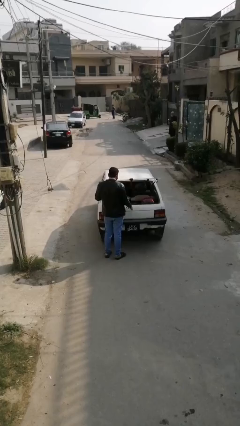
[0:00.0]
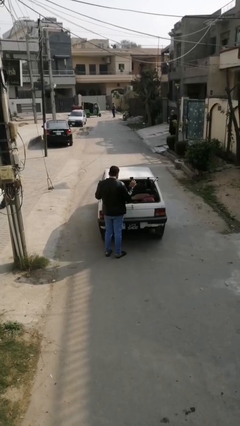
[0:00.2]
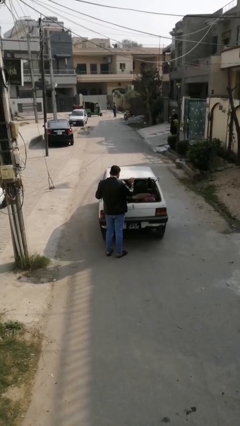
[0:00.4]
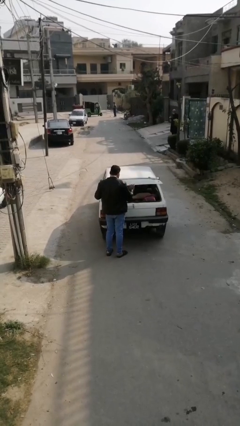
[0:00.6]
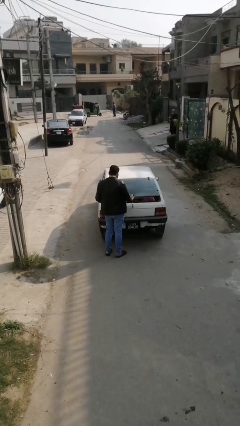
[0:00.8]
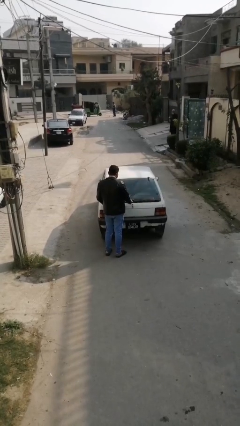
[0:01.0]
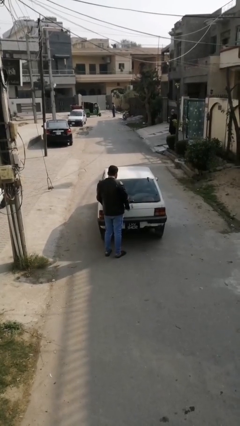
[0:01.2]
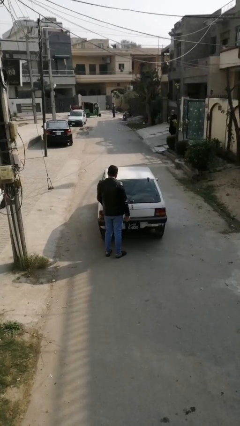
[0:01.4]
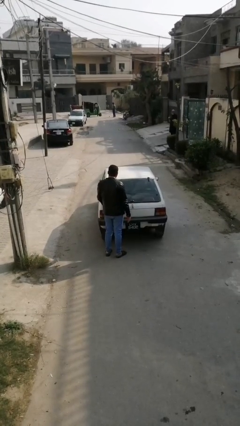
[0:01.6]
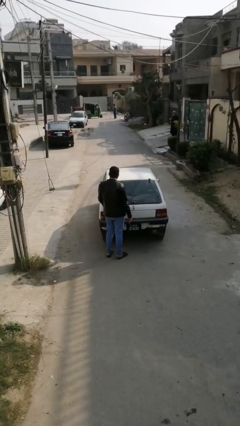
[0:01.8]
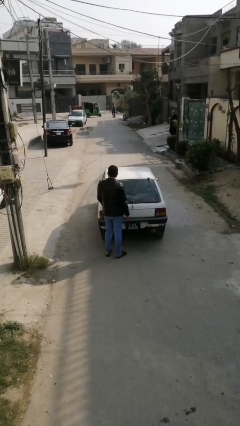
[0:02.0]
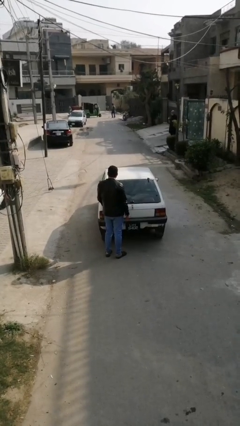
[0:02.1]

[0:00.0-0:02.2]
person closes car trunk

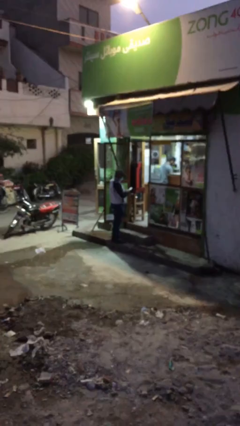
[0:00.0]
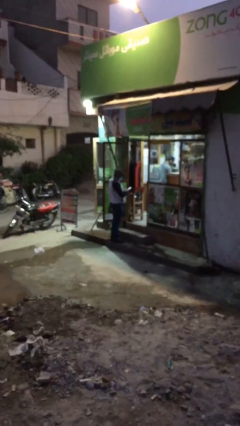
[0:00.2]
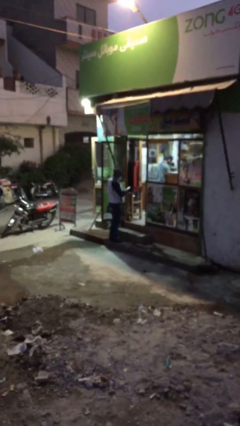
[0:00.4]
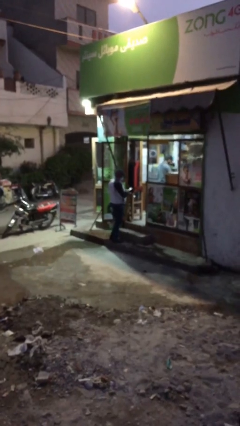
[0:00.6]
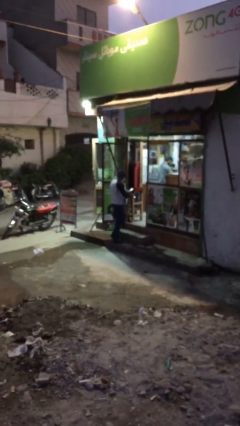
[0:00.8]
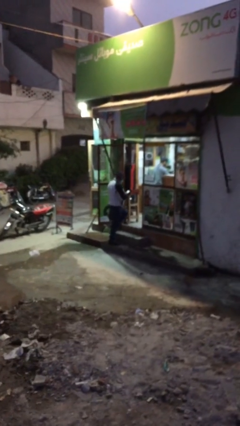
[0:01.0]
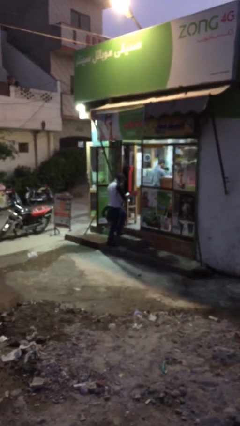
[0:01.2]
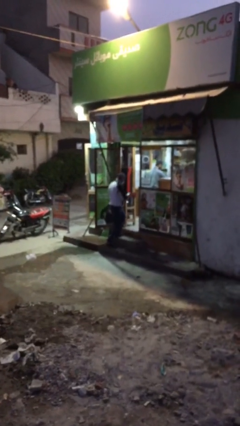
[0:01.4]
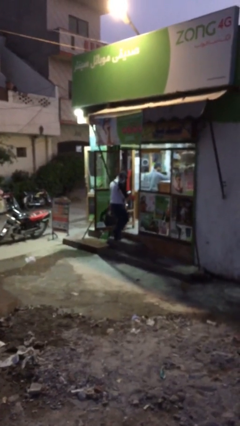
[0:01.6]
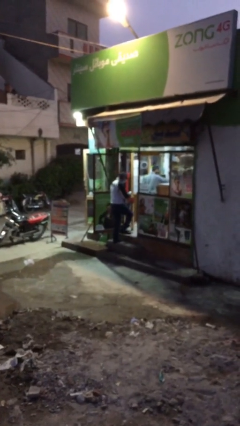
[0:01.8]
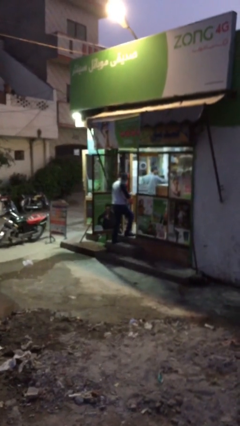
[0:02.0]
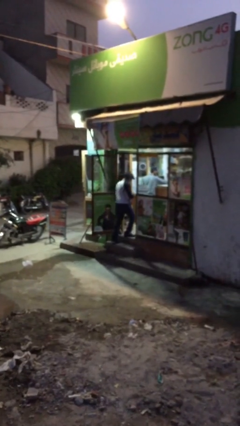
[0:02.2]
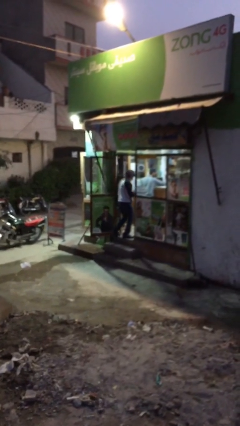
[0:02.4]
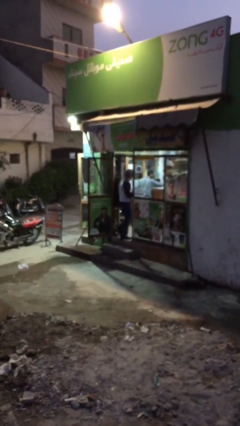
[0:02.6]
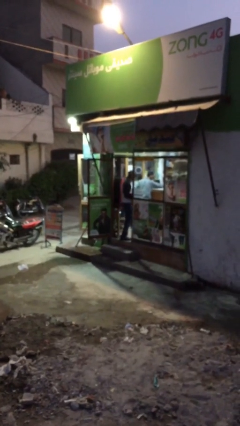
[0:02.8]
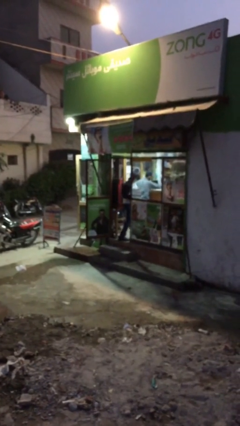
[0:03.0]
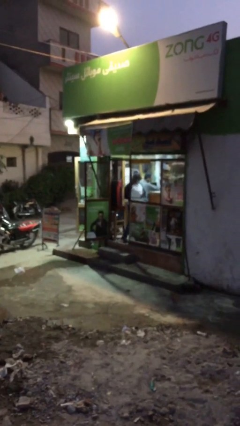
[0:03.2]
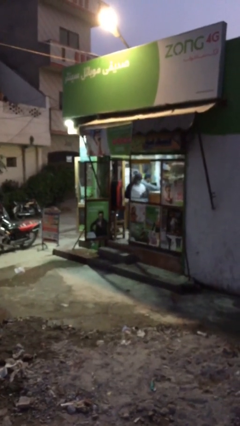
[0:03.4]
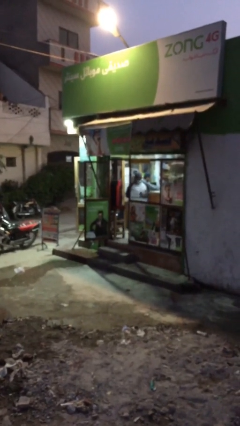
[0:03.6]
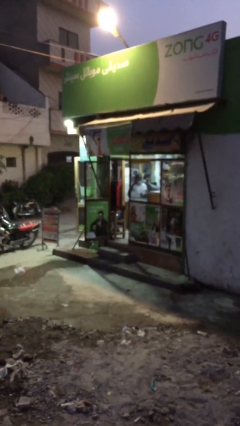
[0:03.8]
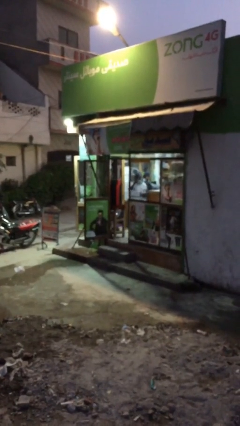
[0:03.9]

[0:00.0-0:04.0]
person enters scene through structure

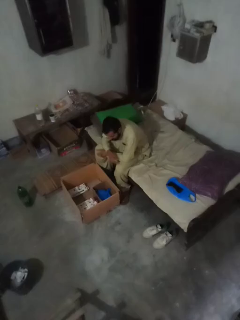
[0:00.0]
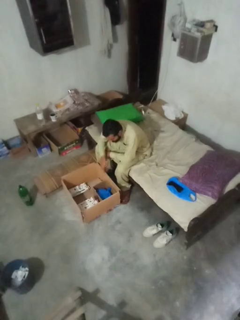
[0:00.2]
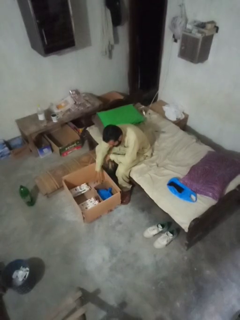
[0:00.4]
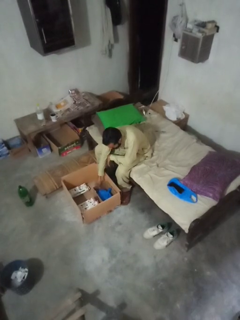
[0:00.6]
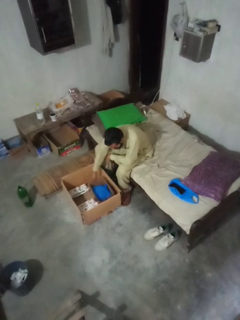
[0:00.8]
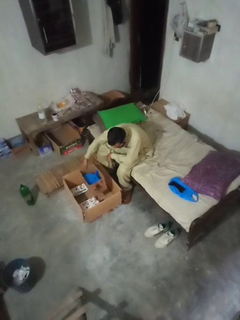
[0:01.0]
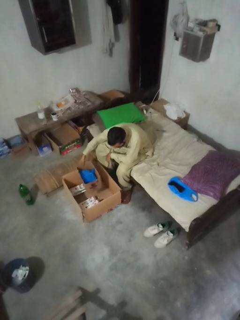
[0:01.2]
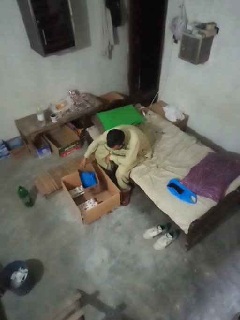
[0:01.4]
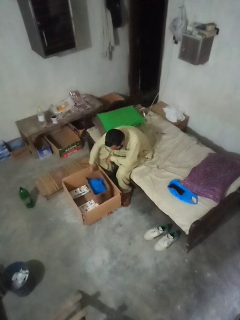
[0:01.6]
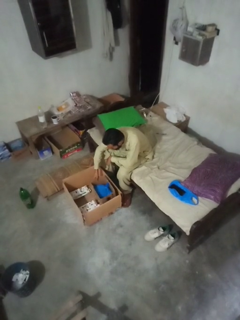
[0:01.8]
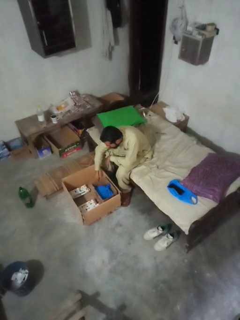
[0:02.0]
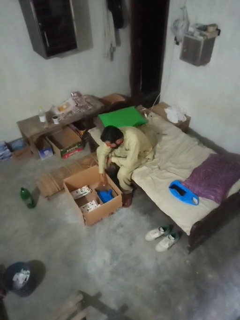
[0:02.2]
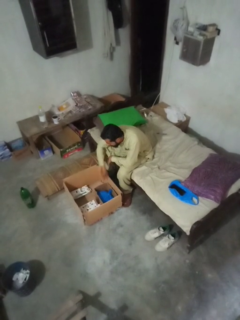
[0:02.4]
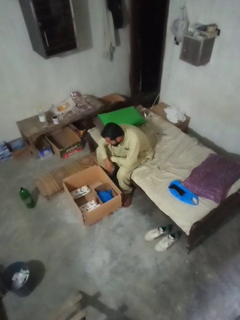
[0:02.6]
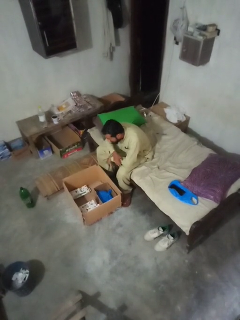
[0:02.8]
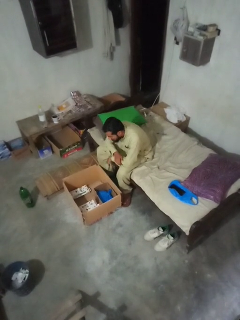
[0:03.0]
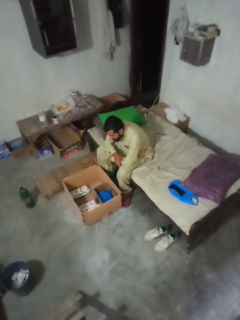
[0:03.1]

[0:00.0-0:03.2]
person searches in box

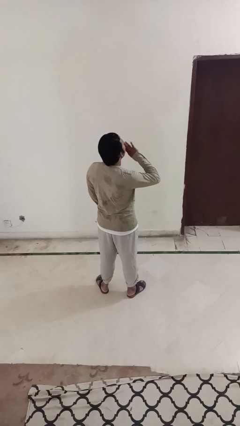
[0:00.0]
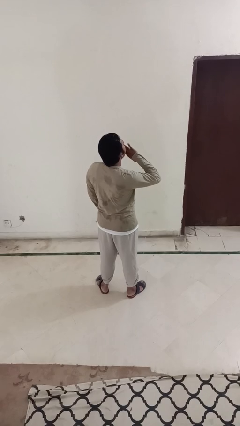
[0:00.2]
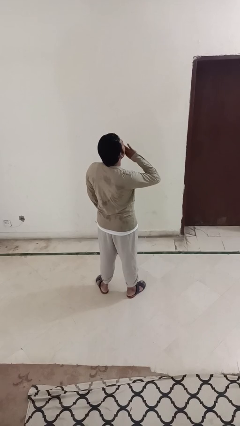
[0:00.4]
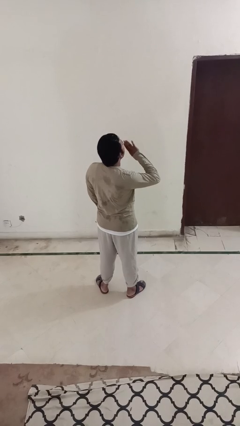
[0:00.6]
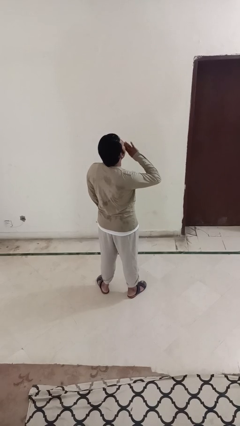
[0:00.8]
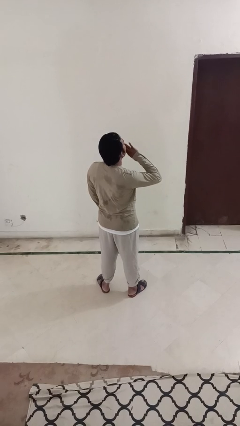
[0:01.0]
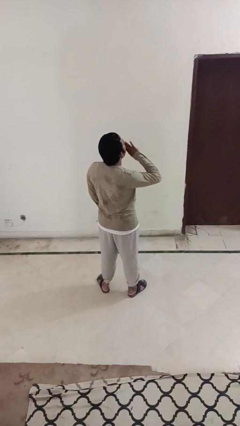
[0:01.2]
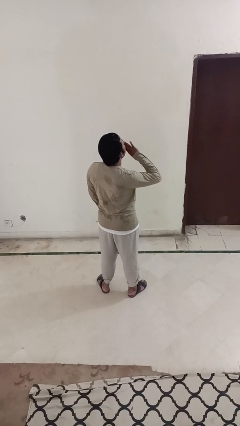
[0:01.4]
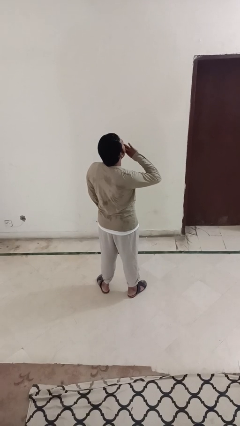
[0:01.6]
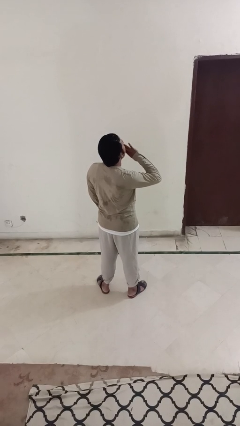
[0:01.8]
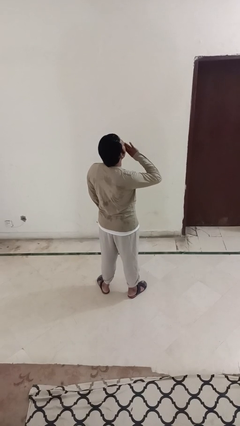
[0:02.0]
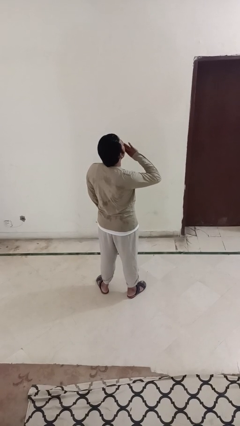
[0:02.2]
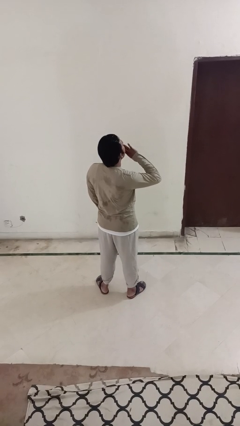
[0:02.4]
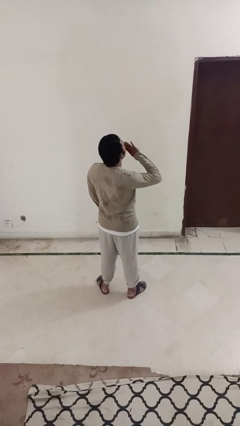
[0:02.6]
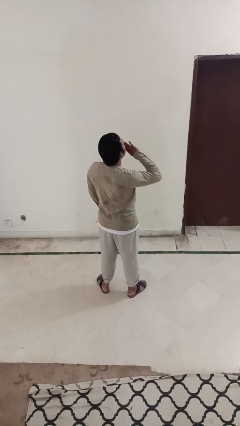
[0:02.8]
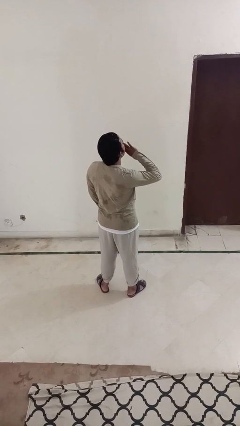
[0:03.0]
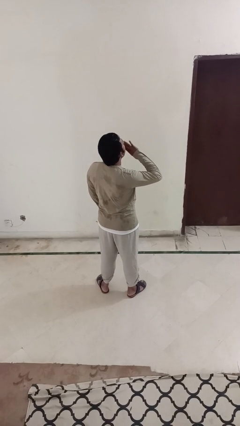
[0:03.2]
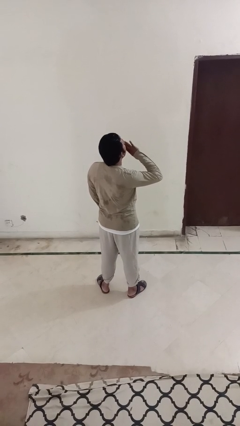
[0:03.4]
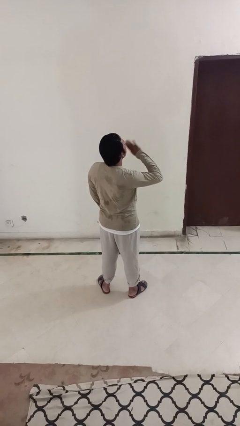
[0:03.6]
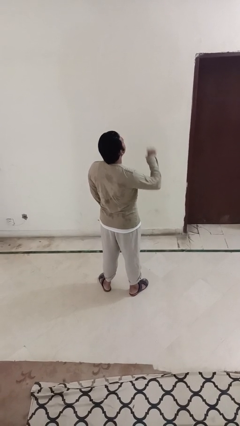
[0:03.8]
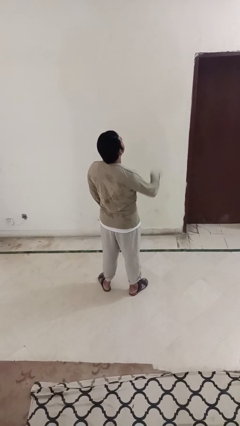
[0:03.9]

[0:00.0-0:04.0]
person yawns

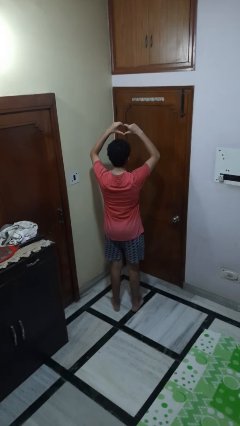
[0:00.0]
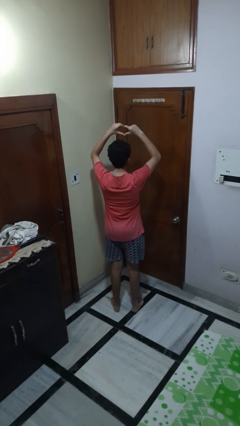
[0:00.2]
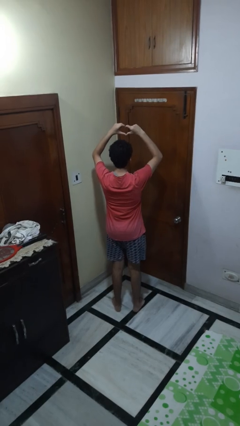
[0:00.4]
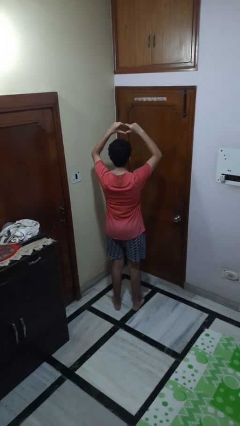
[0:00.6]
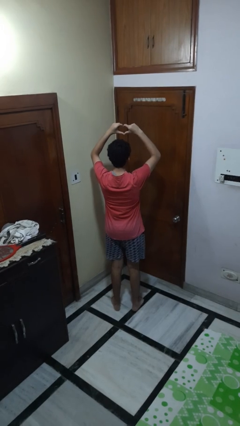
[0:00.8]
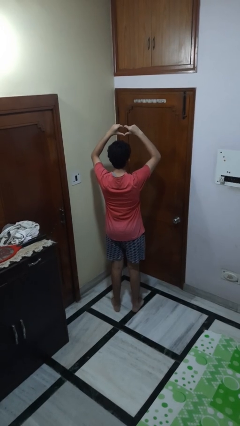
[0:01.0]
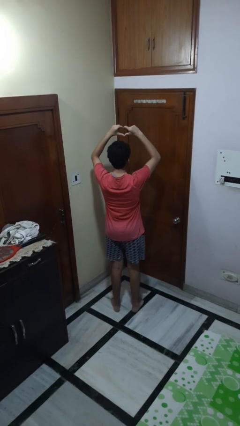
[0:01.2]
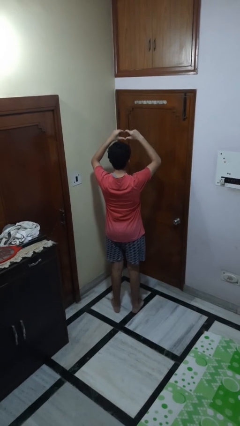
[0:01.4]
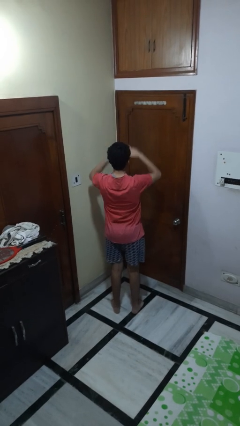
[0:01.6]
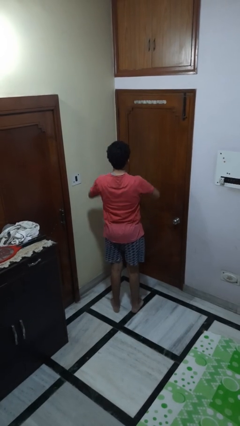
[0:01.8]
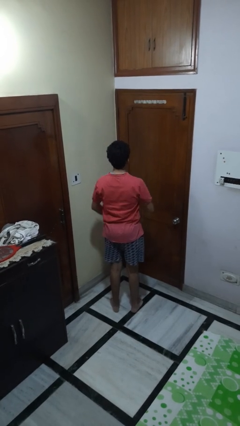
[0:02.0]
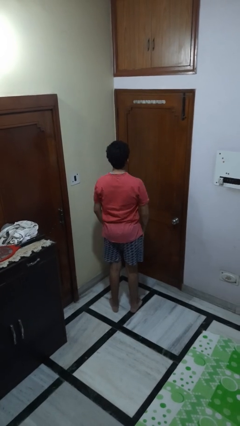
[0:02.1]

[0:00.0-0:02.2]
person gestures heart

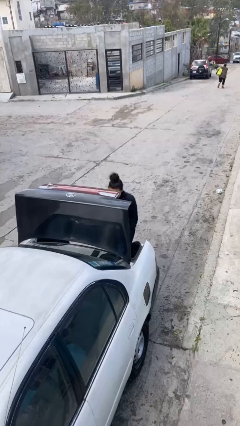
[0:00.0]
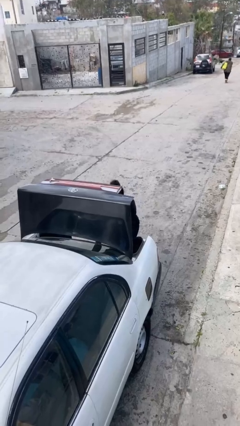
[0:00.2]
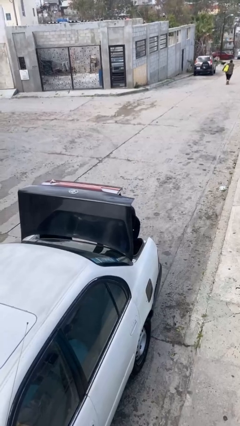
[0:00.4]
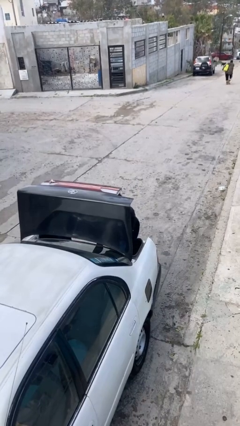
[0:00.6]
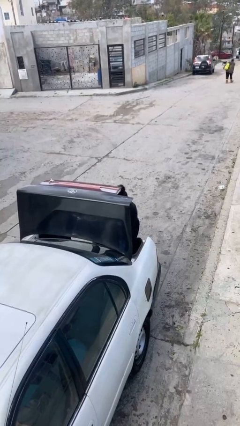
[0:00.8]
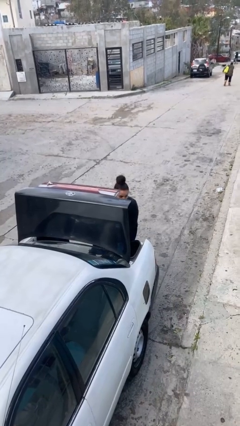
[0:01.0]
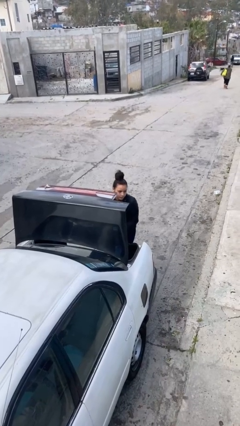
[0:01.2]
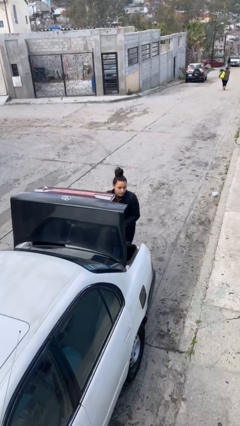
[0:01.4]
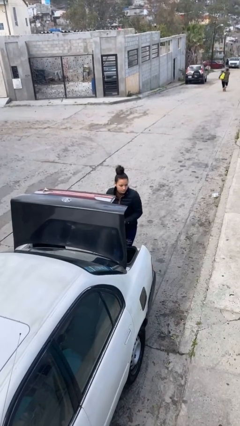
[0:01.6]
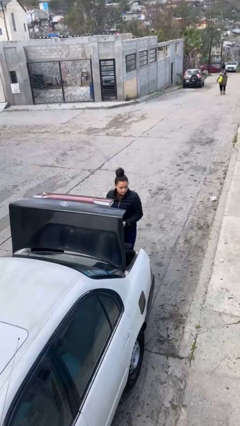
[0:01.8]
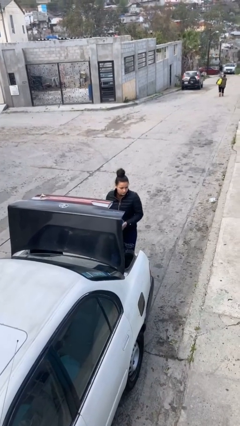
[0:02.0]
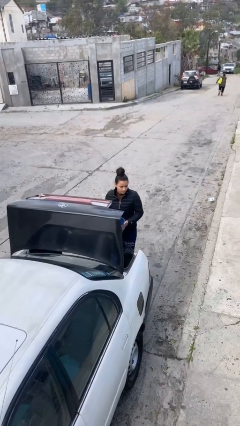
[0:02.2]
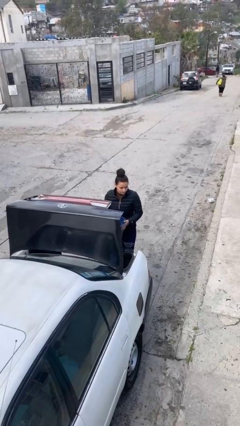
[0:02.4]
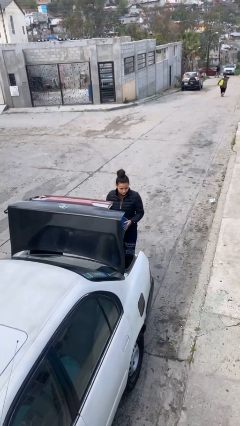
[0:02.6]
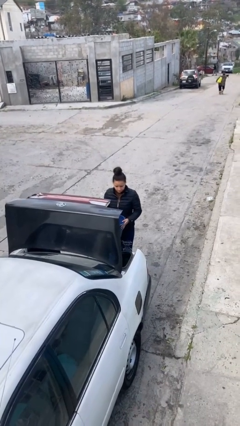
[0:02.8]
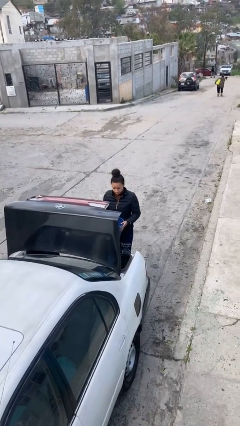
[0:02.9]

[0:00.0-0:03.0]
person unloads car
